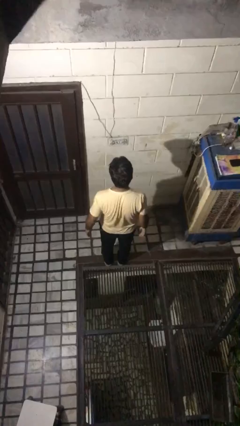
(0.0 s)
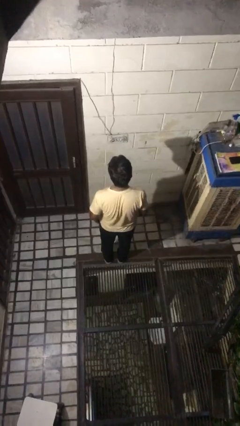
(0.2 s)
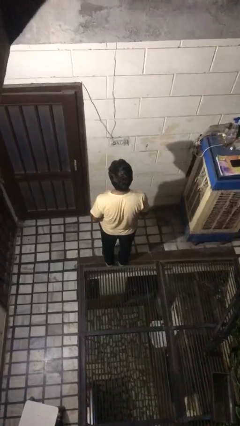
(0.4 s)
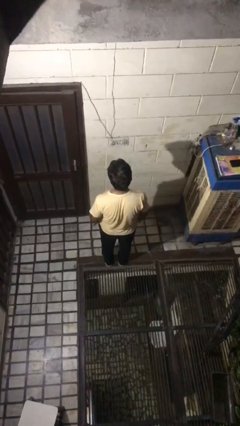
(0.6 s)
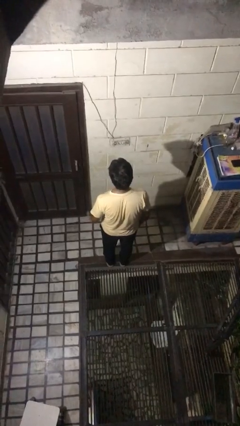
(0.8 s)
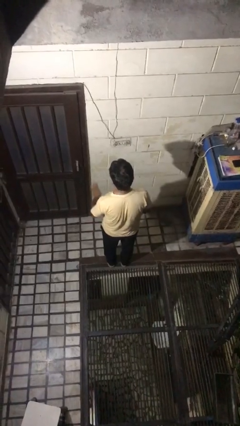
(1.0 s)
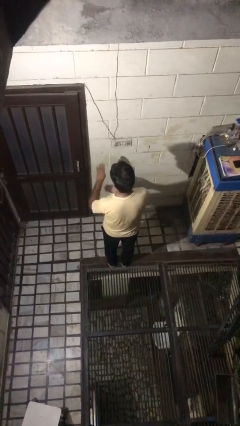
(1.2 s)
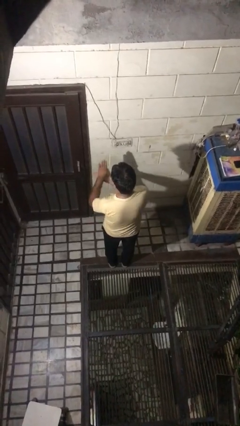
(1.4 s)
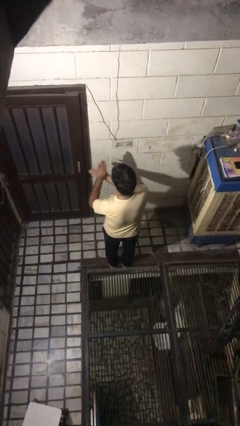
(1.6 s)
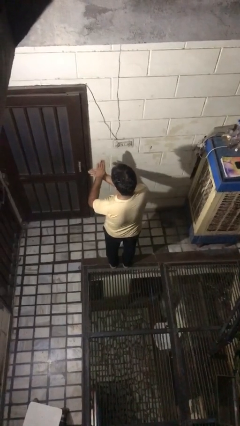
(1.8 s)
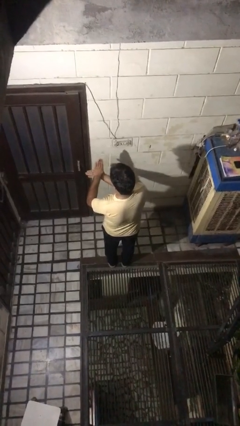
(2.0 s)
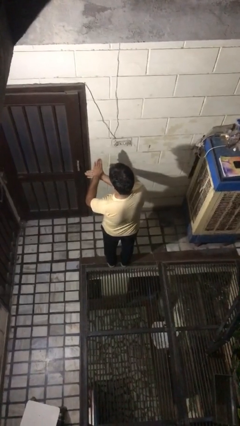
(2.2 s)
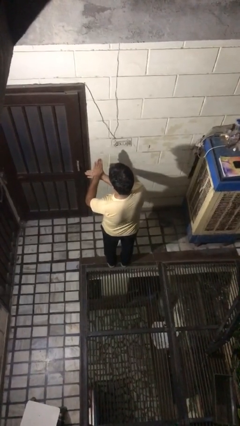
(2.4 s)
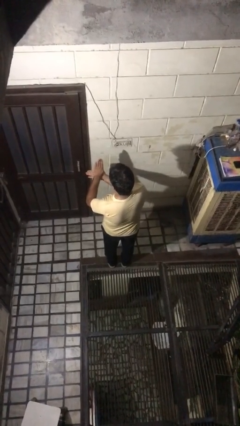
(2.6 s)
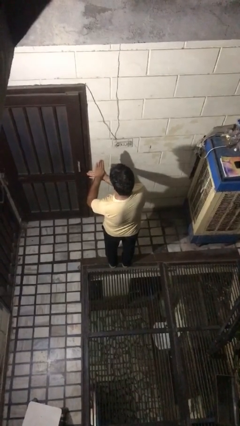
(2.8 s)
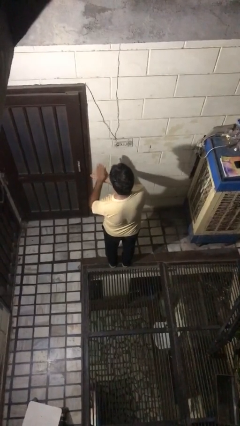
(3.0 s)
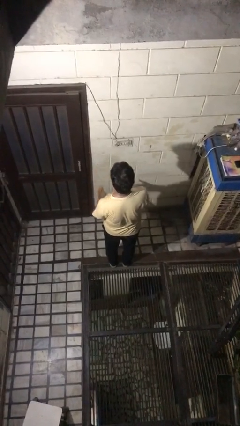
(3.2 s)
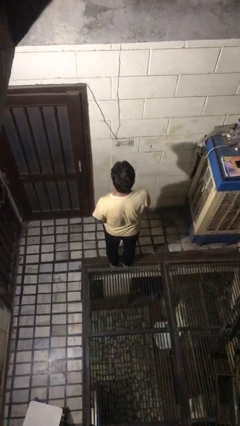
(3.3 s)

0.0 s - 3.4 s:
person gestures number four

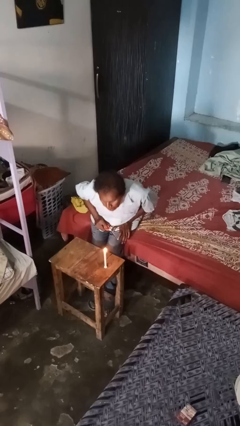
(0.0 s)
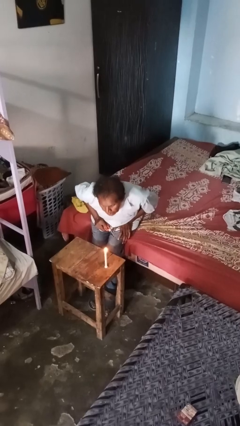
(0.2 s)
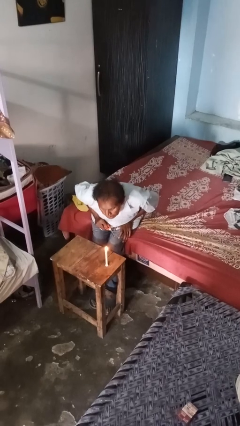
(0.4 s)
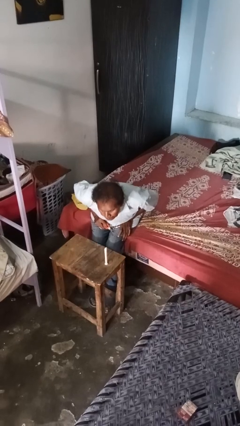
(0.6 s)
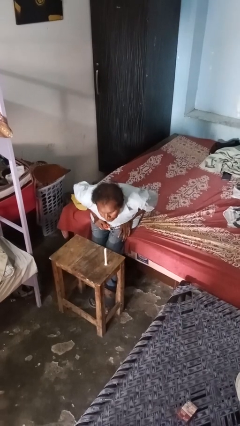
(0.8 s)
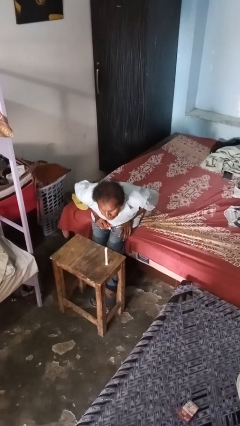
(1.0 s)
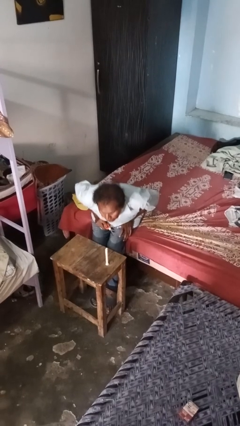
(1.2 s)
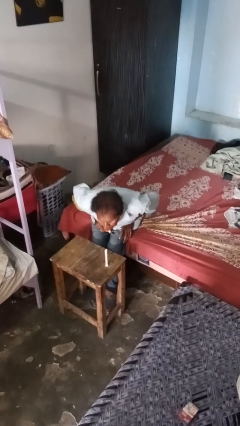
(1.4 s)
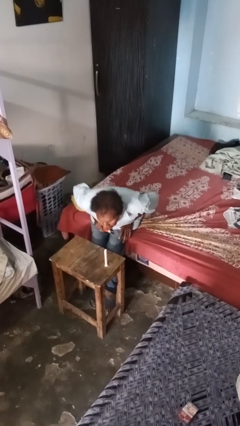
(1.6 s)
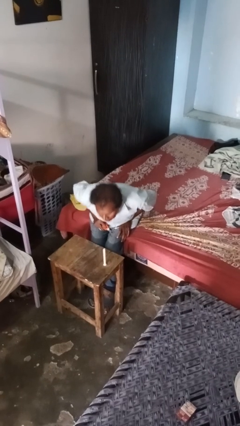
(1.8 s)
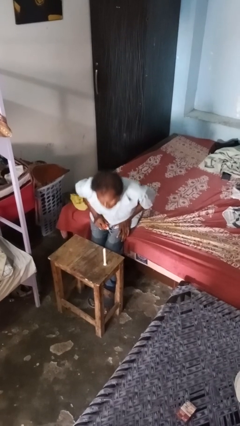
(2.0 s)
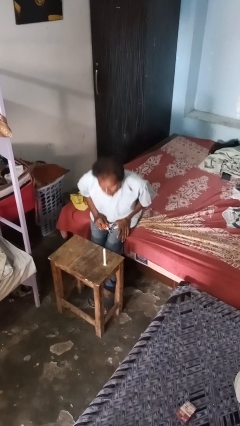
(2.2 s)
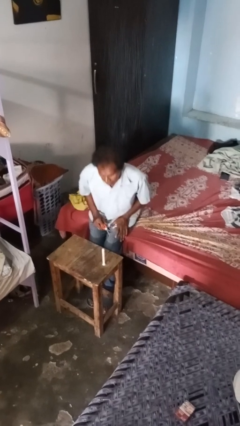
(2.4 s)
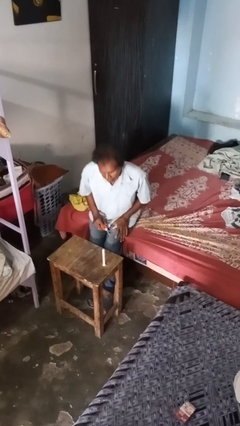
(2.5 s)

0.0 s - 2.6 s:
person extinguishes candle

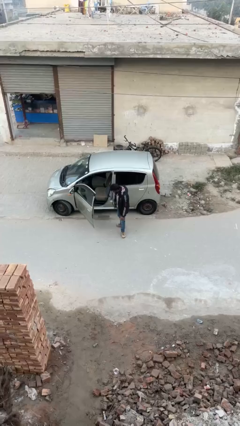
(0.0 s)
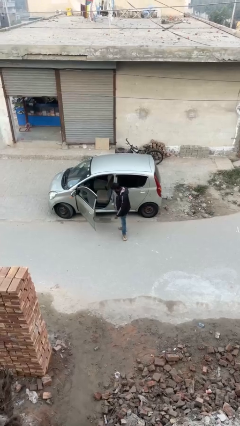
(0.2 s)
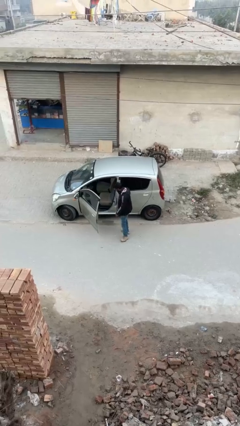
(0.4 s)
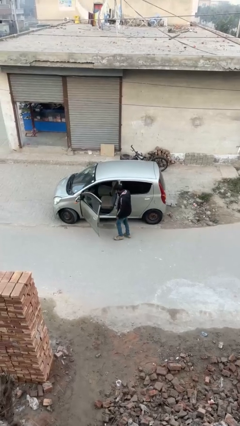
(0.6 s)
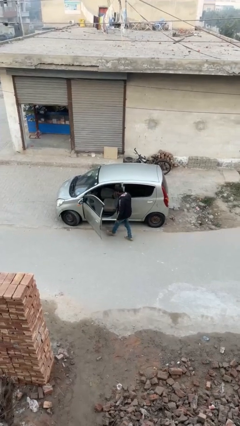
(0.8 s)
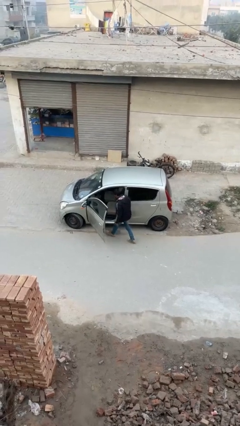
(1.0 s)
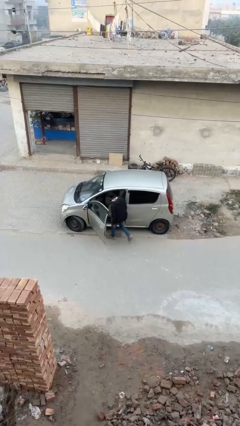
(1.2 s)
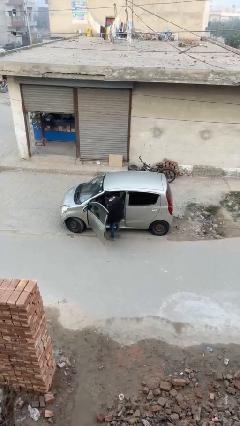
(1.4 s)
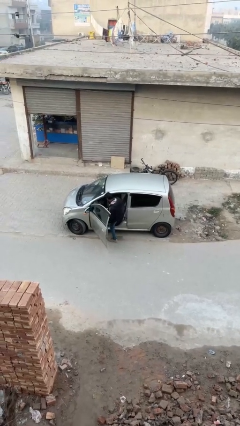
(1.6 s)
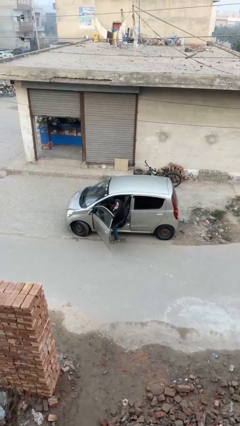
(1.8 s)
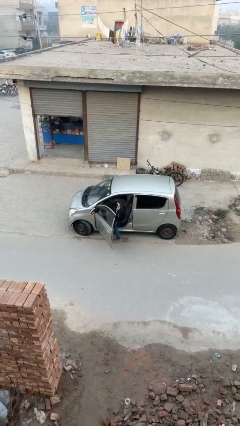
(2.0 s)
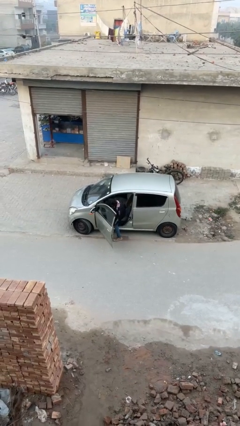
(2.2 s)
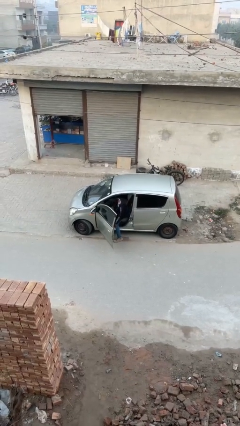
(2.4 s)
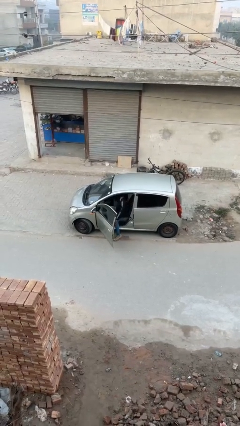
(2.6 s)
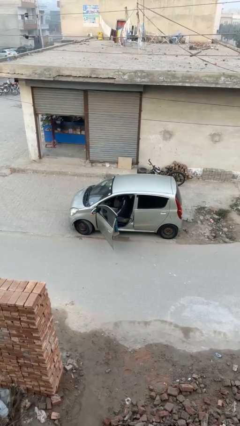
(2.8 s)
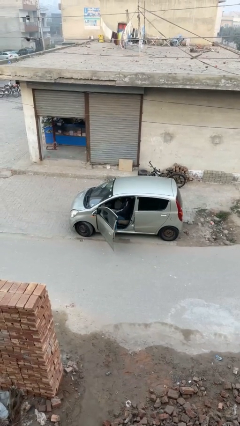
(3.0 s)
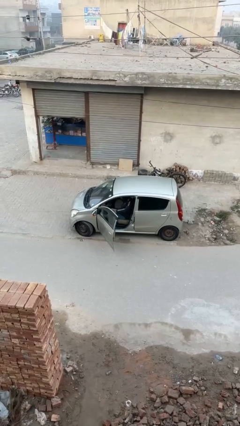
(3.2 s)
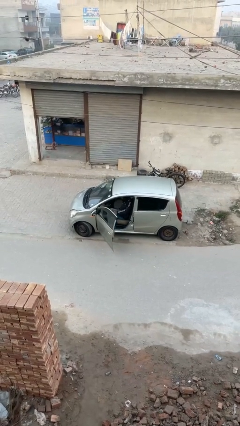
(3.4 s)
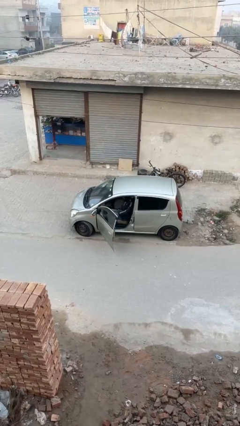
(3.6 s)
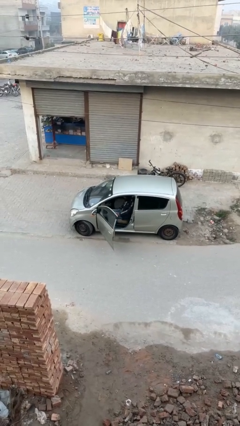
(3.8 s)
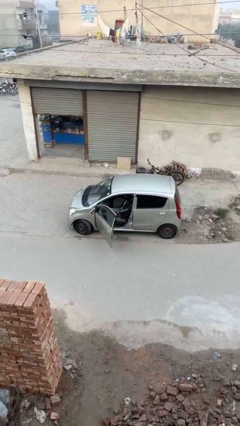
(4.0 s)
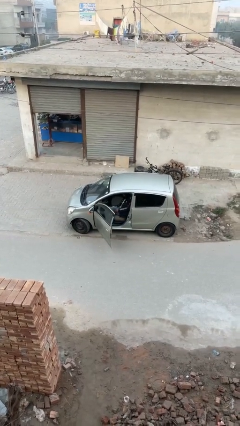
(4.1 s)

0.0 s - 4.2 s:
person enters car

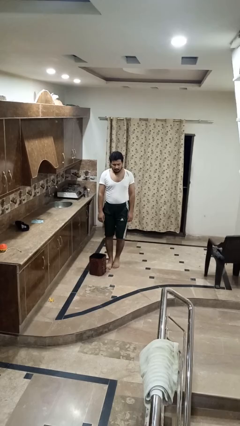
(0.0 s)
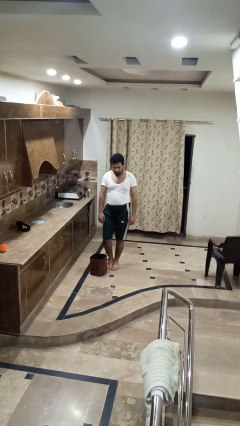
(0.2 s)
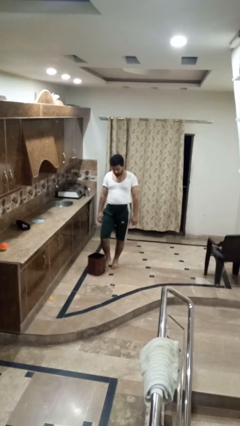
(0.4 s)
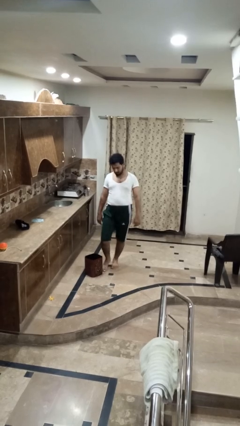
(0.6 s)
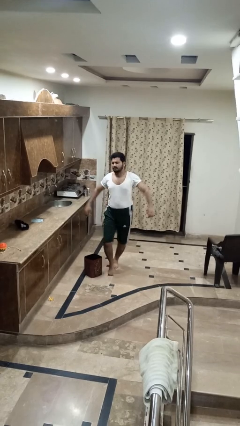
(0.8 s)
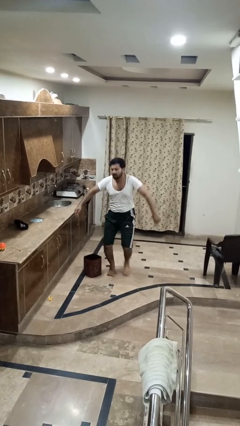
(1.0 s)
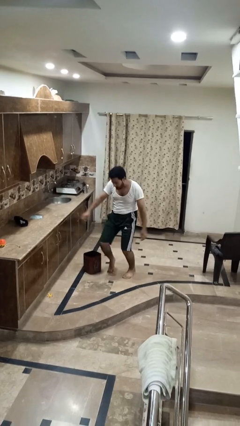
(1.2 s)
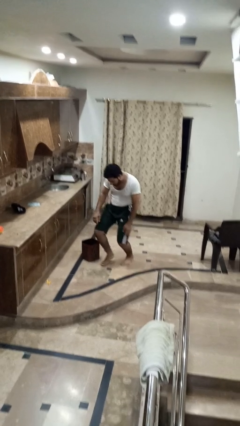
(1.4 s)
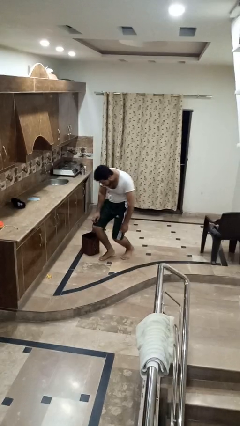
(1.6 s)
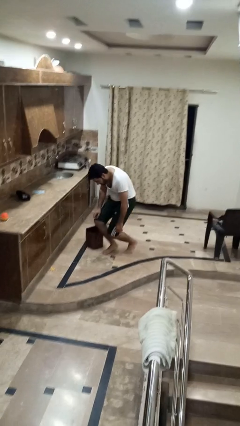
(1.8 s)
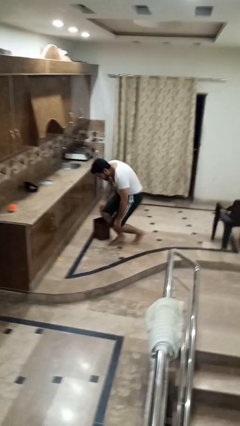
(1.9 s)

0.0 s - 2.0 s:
person trips on object on floor

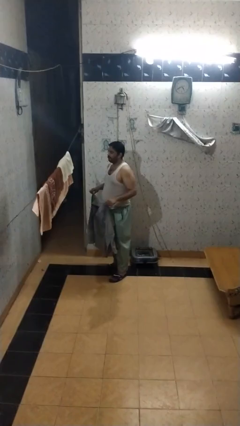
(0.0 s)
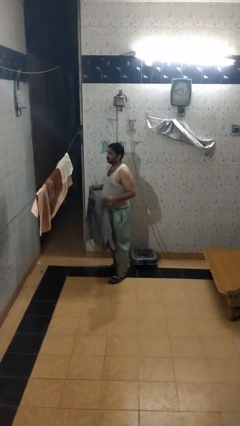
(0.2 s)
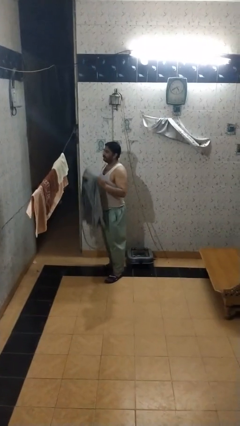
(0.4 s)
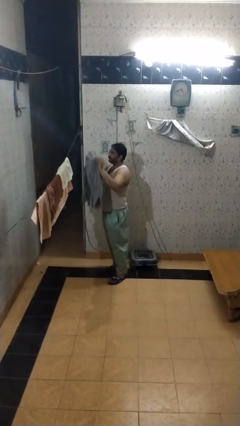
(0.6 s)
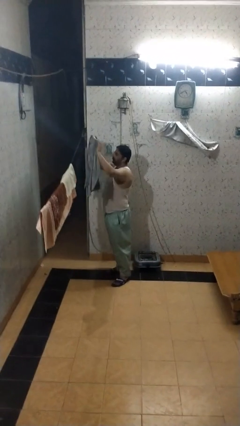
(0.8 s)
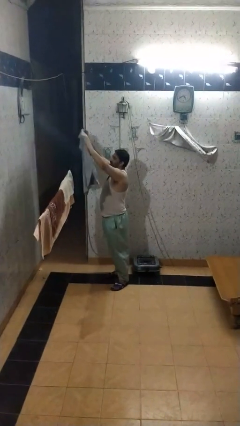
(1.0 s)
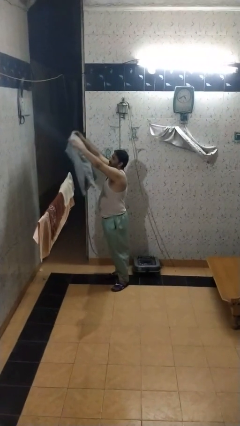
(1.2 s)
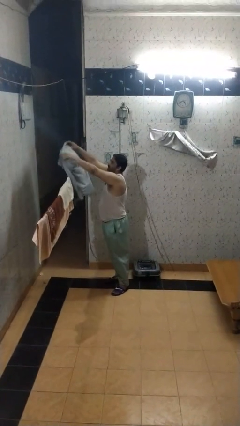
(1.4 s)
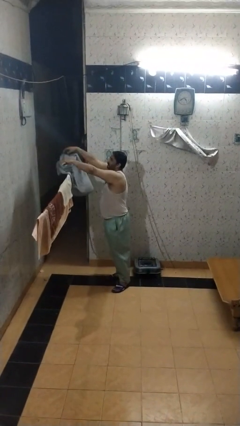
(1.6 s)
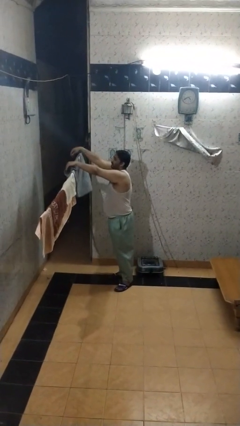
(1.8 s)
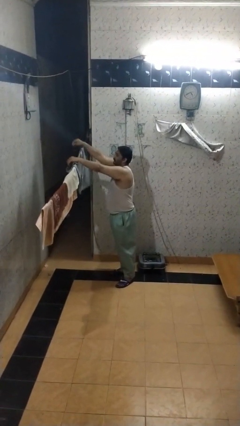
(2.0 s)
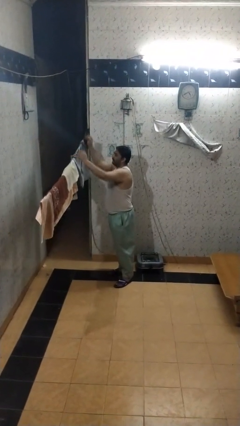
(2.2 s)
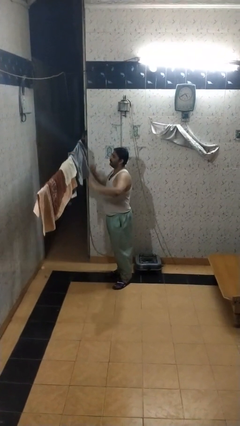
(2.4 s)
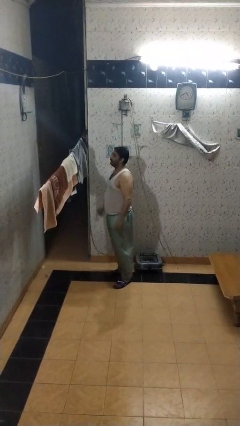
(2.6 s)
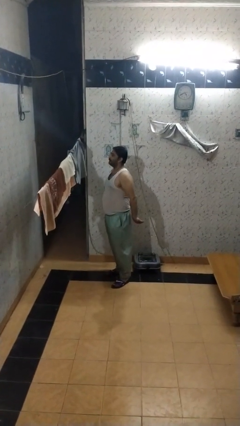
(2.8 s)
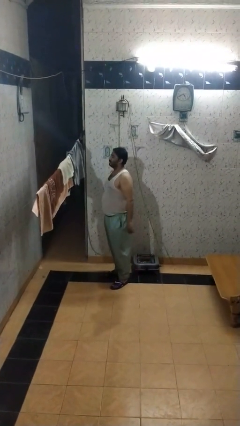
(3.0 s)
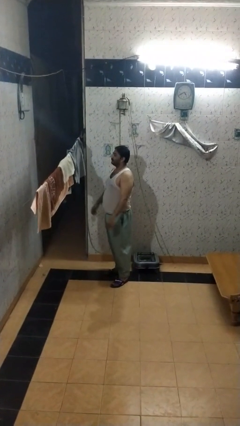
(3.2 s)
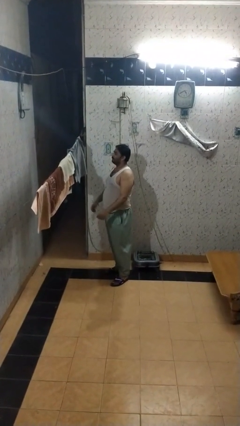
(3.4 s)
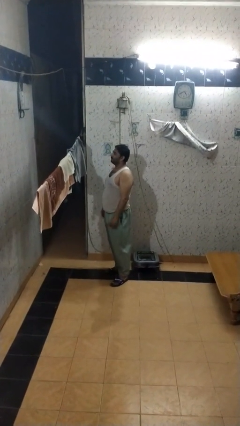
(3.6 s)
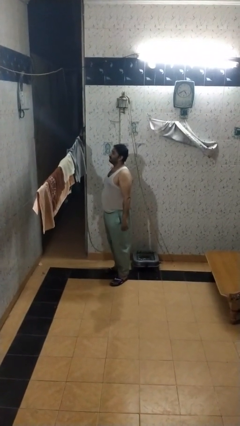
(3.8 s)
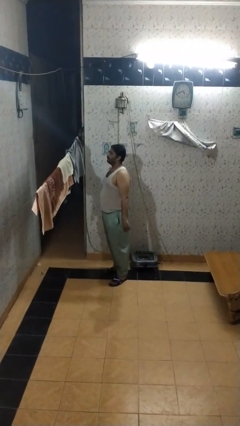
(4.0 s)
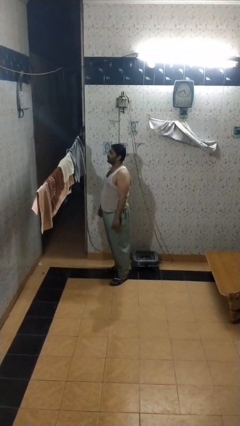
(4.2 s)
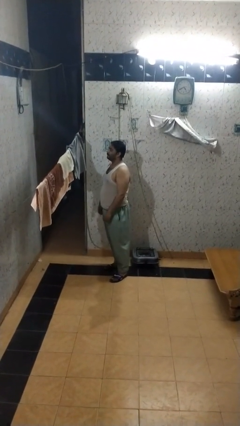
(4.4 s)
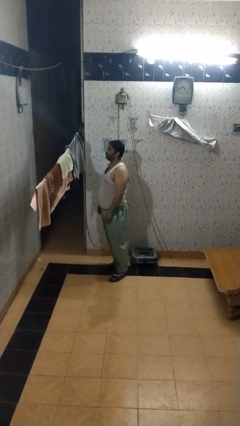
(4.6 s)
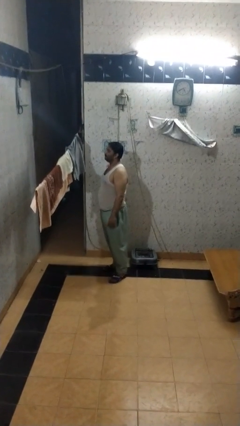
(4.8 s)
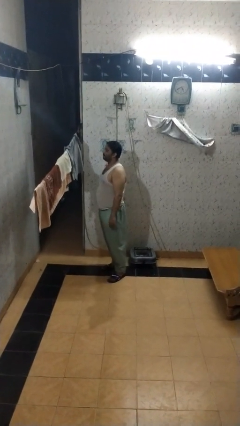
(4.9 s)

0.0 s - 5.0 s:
person puts clothes into closet
